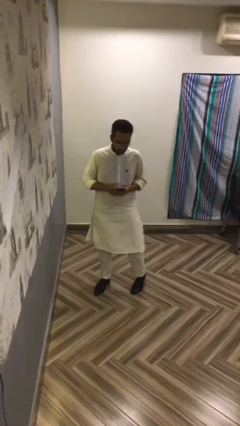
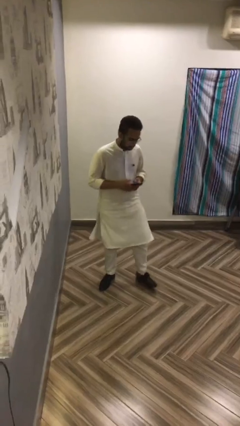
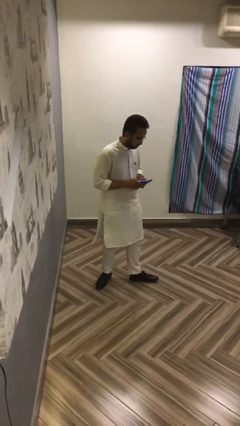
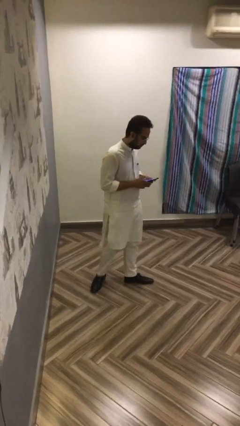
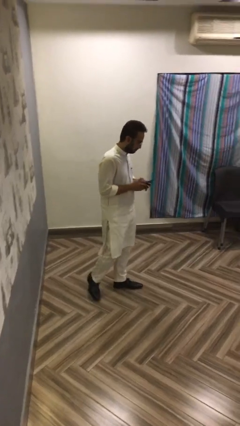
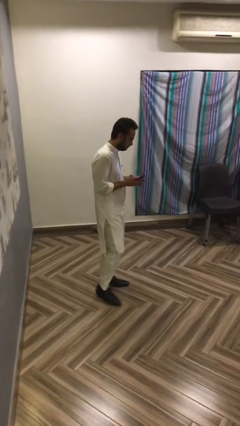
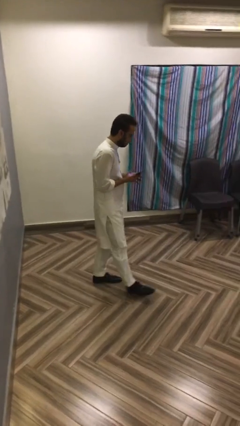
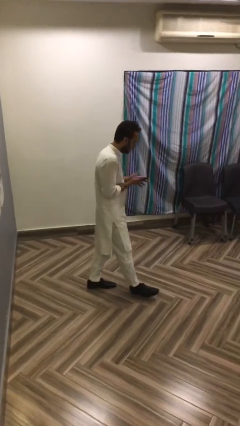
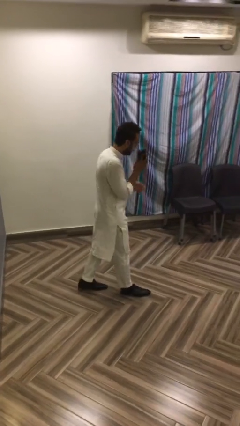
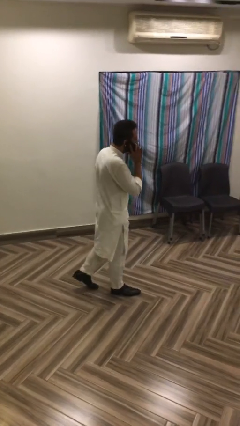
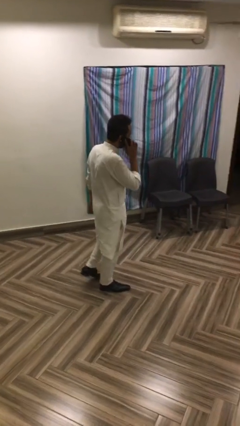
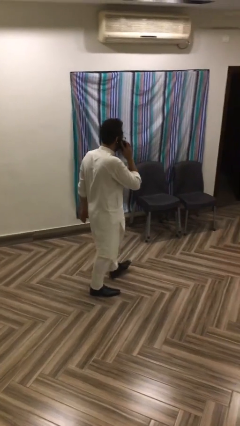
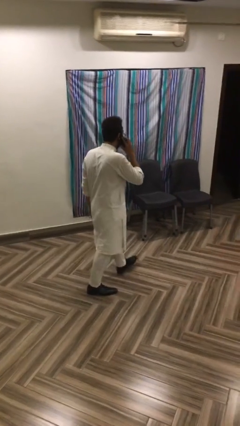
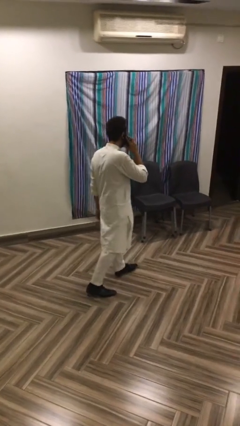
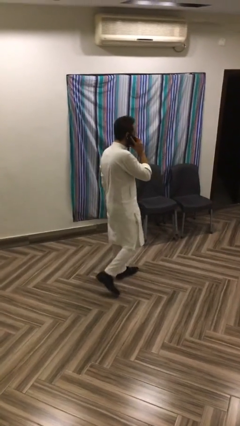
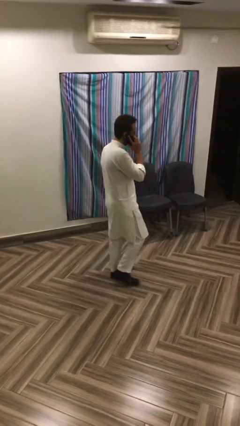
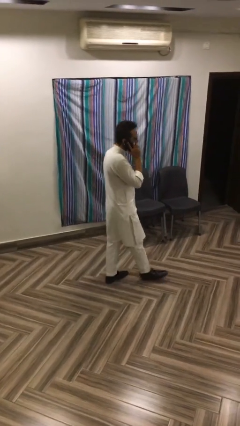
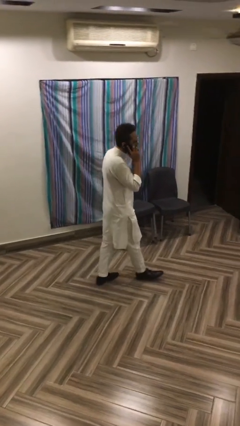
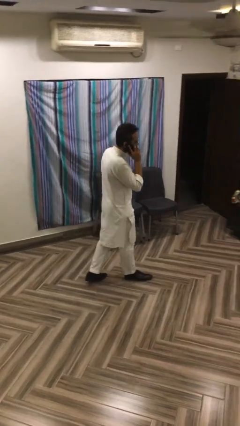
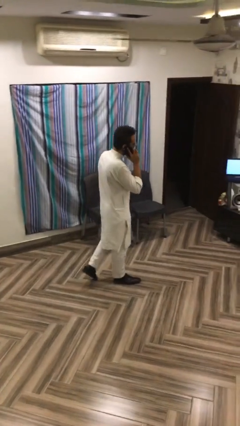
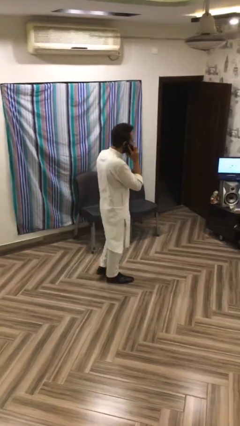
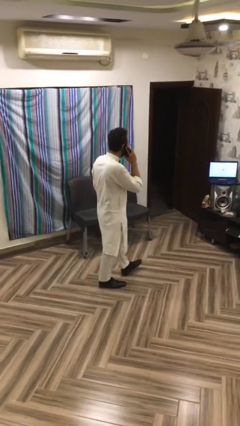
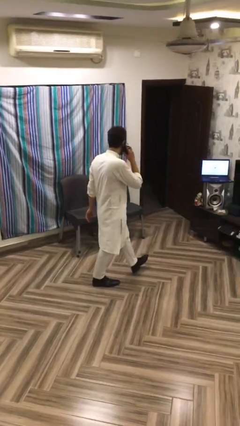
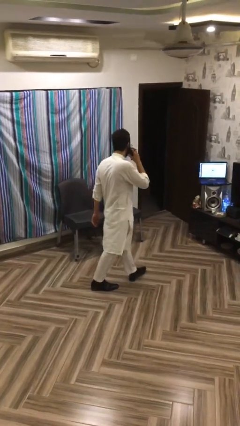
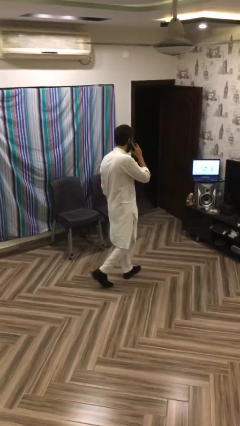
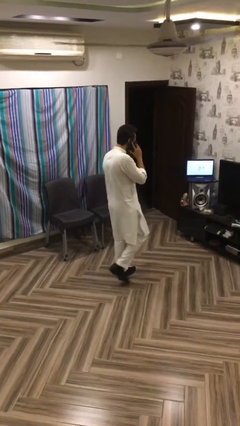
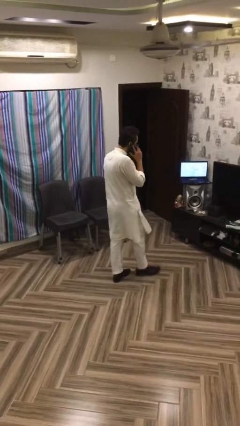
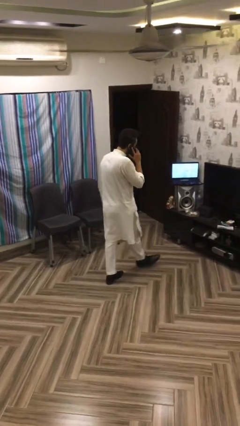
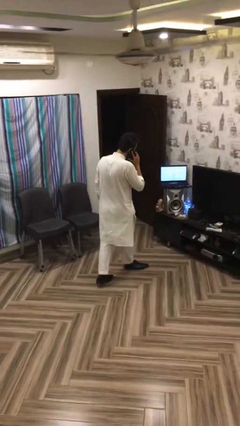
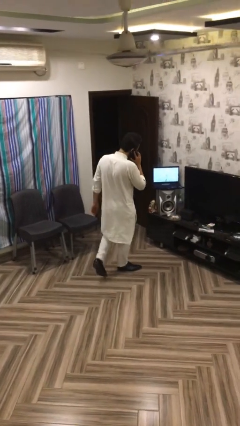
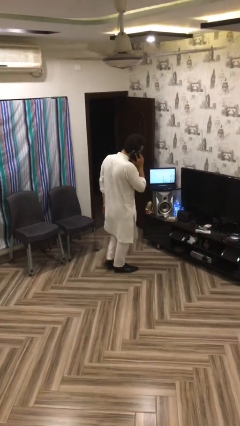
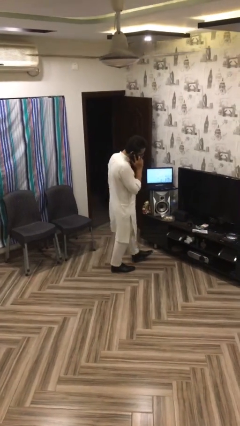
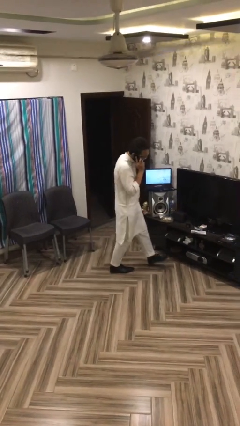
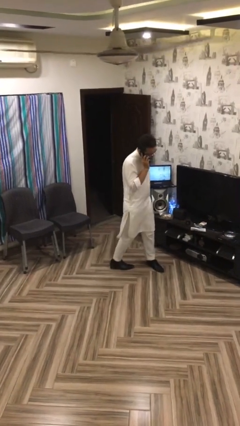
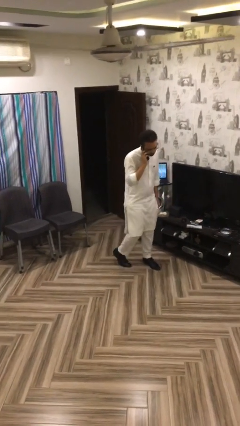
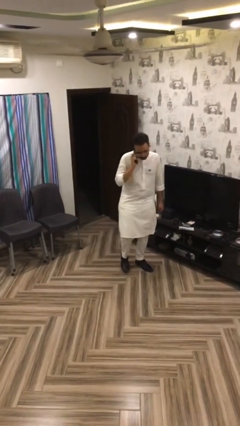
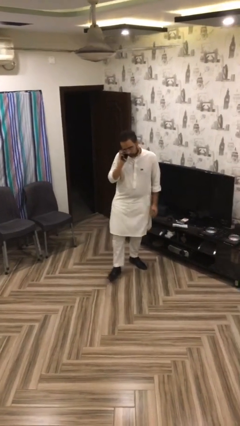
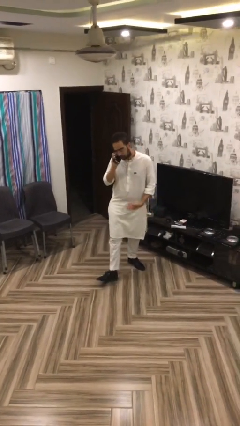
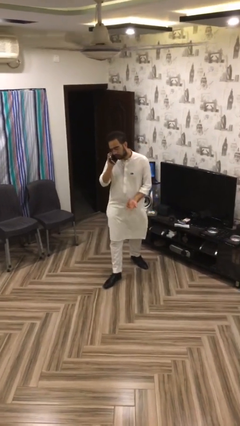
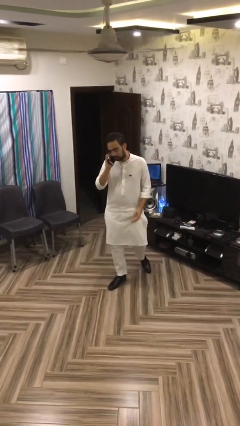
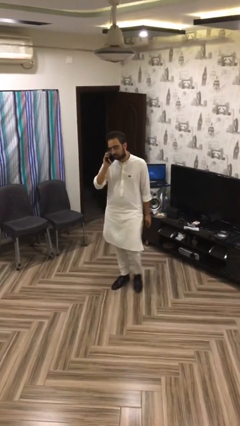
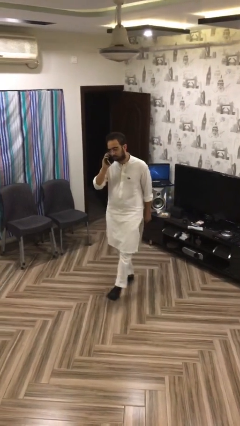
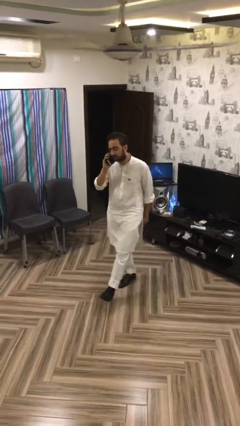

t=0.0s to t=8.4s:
person talks on phone

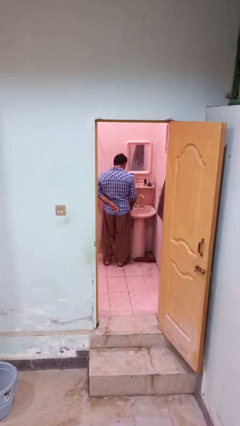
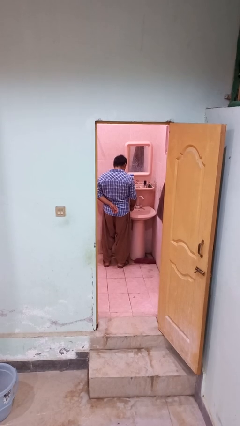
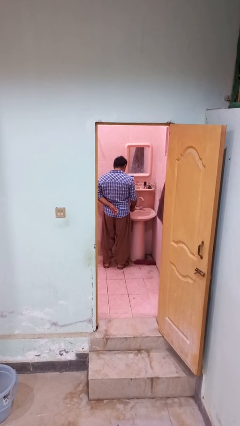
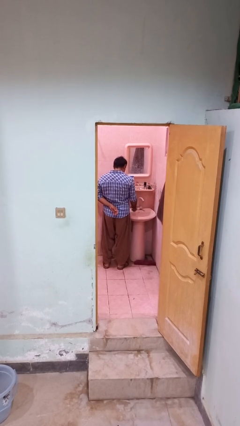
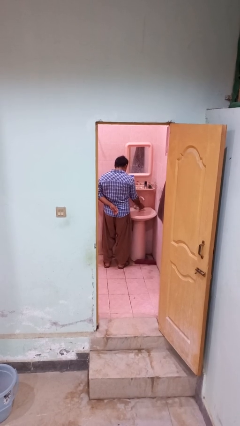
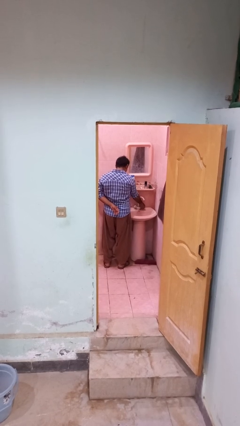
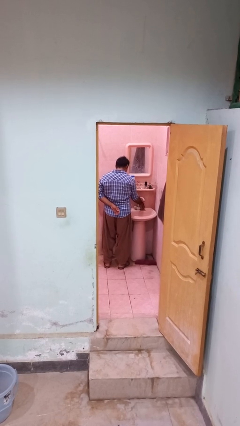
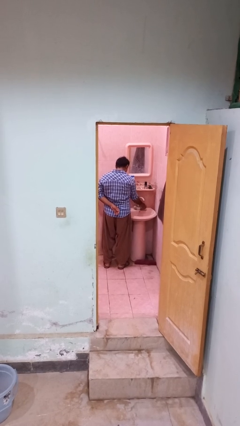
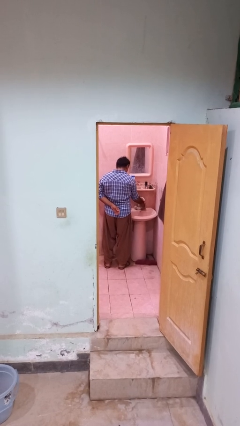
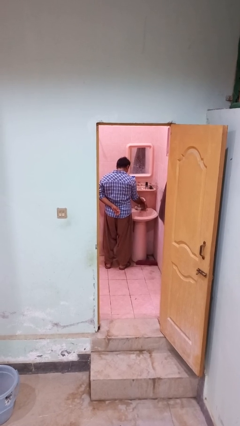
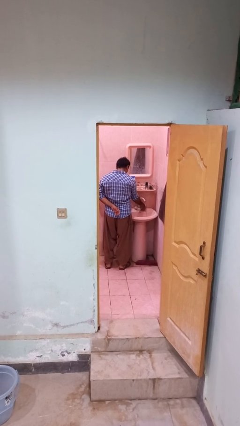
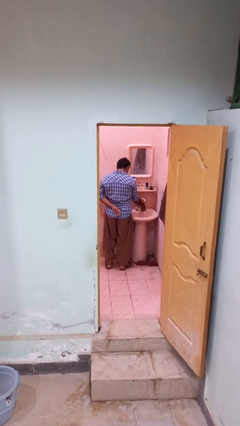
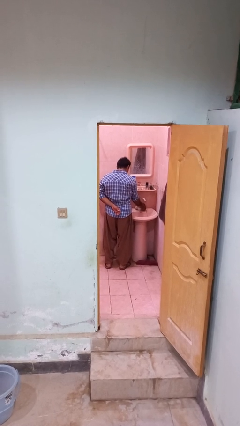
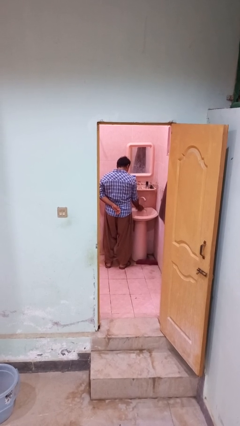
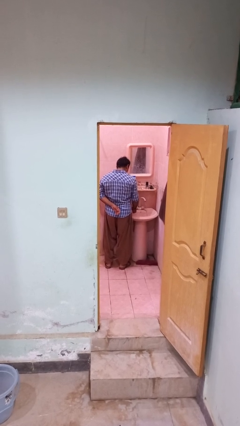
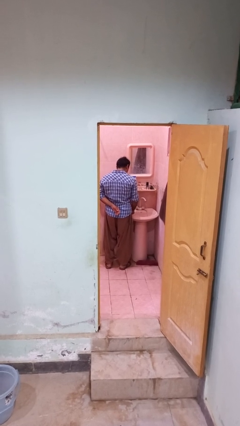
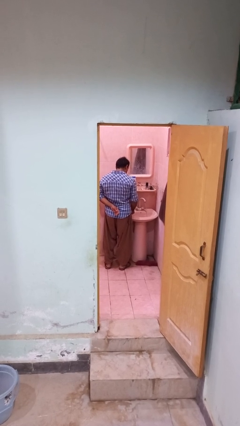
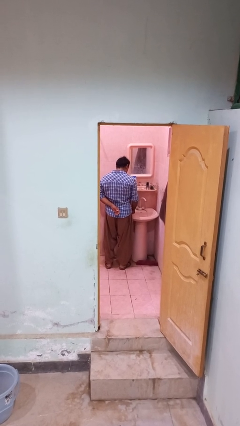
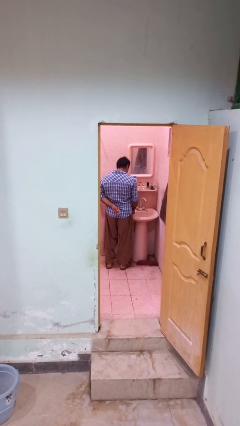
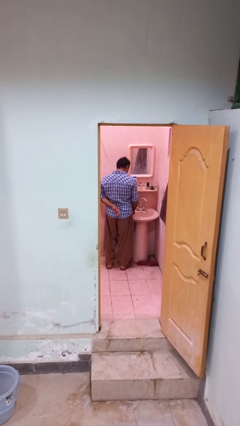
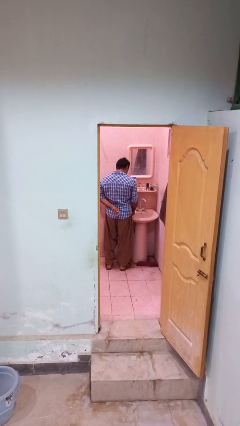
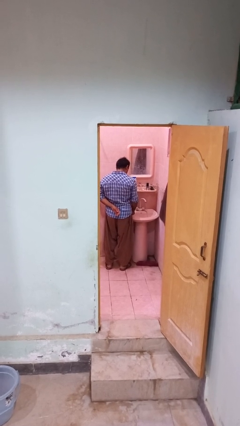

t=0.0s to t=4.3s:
person turns on faucet

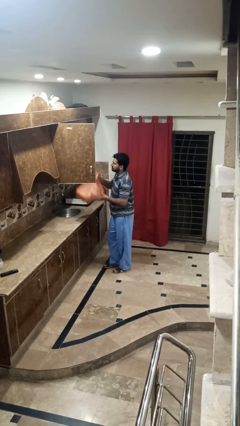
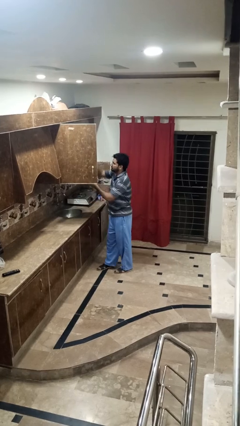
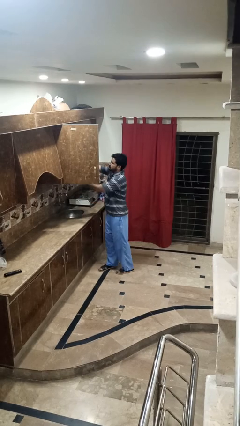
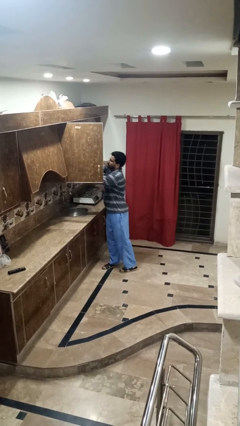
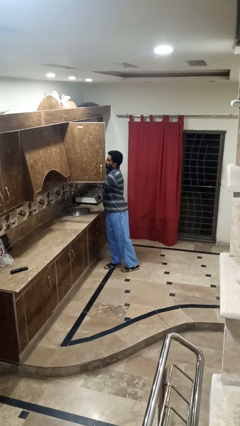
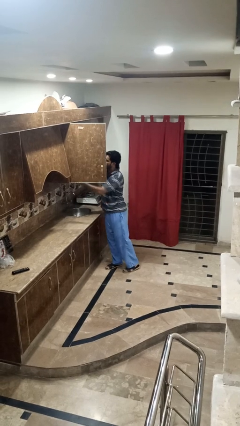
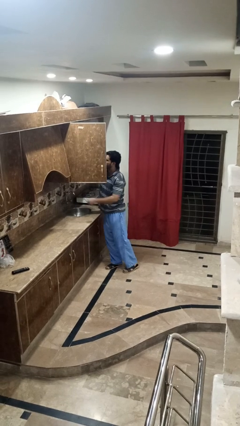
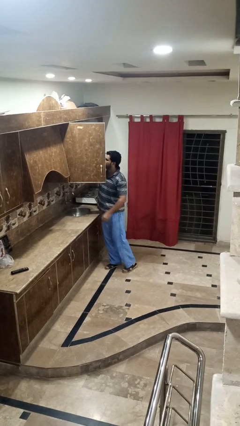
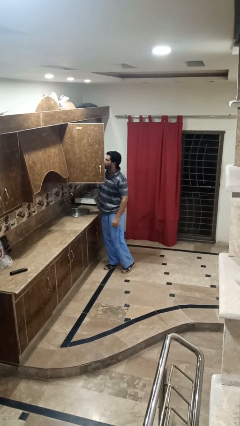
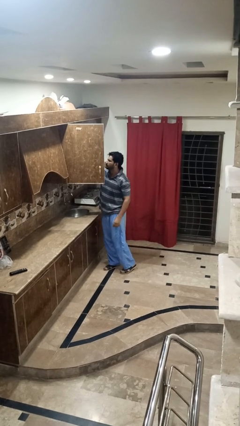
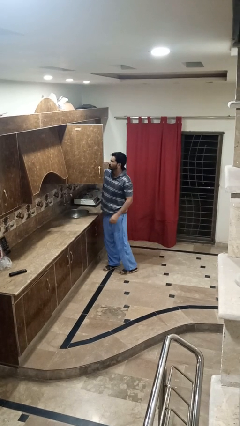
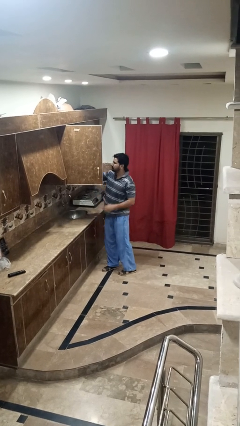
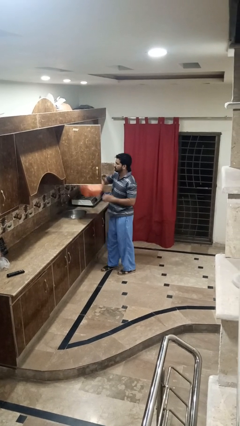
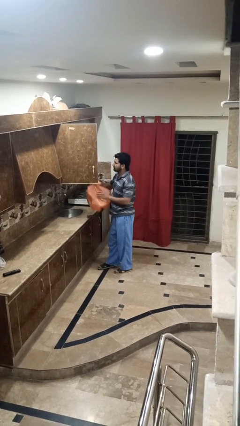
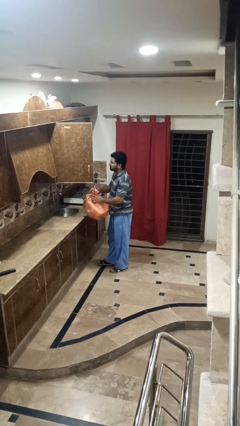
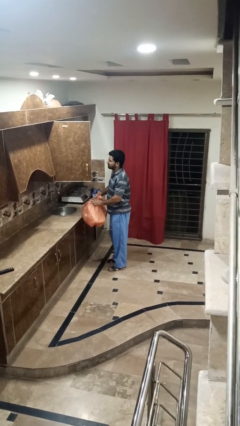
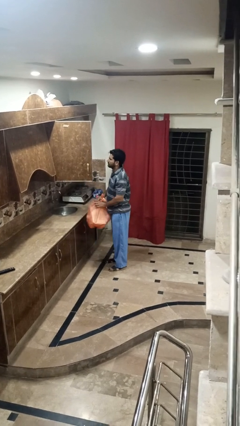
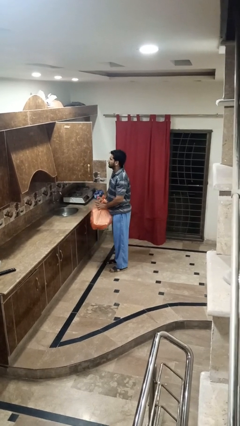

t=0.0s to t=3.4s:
person loads groceries into cabinet

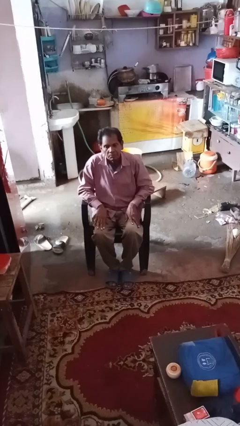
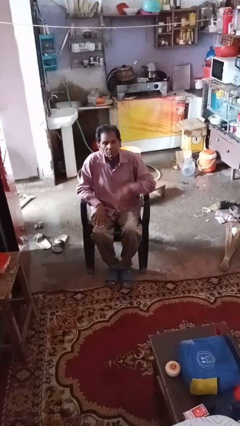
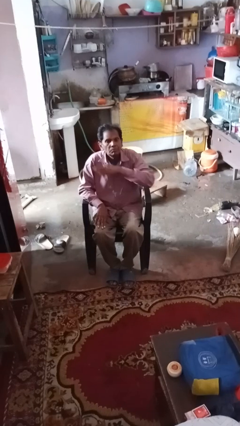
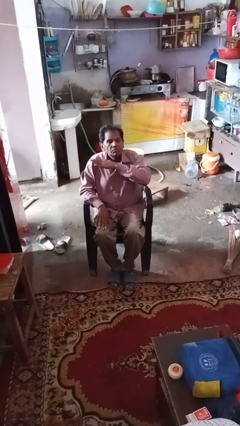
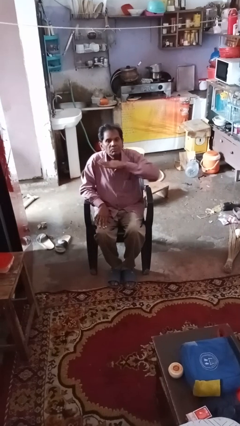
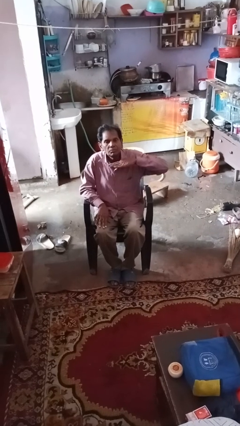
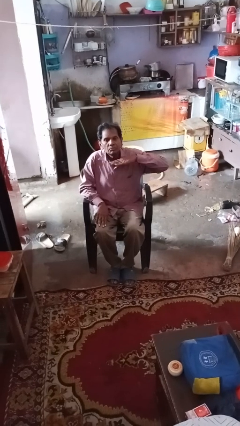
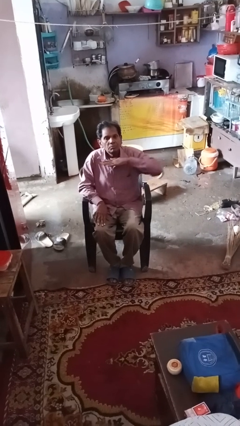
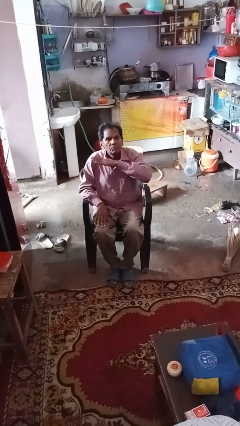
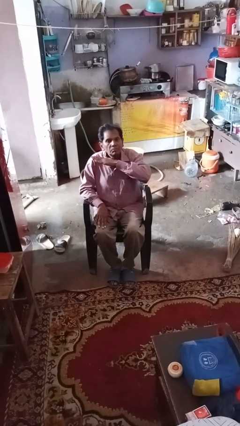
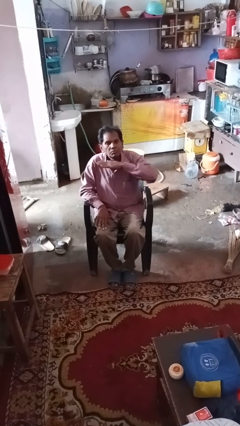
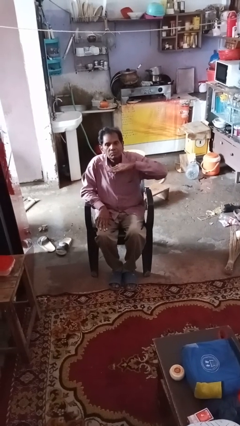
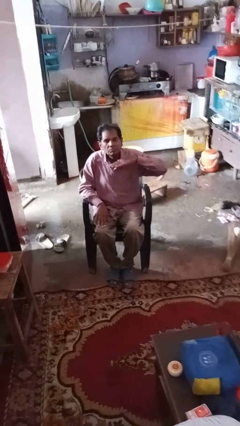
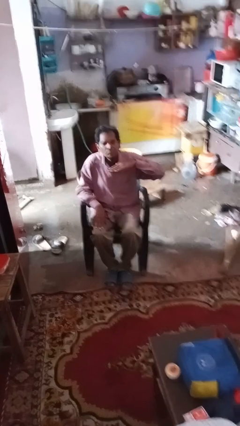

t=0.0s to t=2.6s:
person gestures cut
